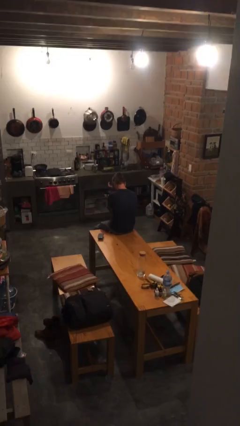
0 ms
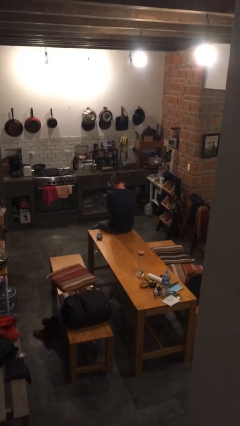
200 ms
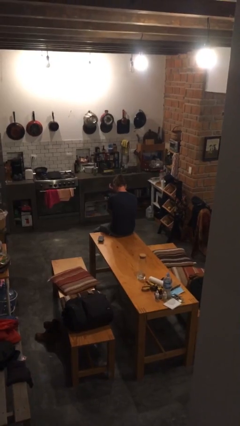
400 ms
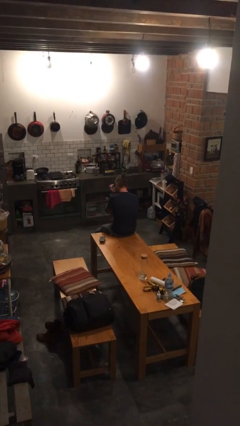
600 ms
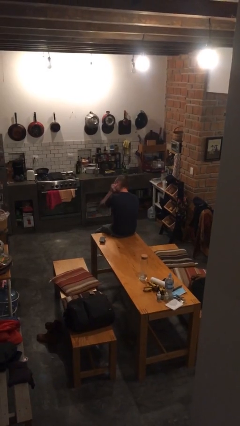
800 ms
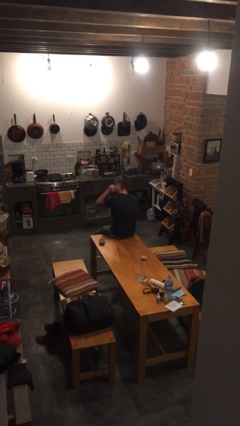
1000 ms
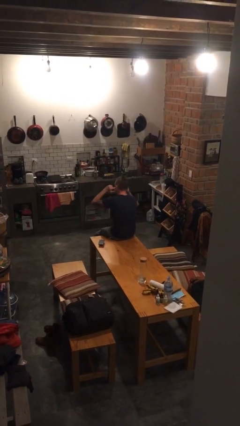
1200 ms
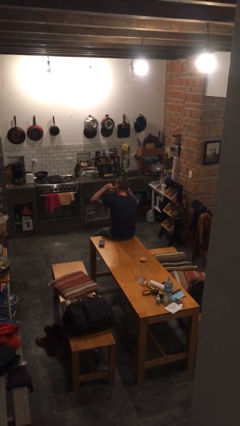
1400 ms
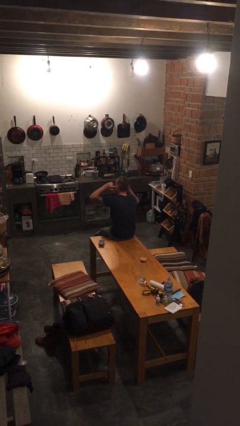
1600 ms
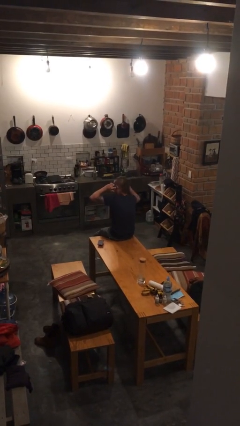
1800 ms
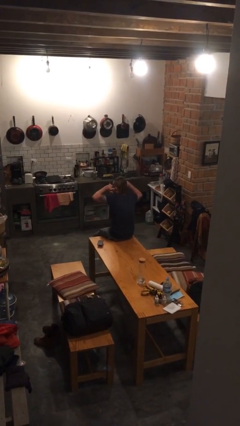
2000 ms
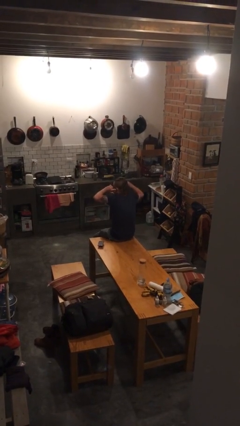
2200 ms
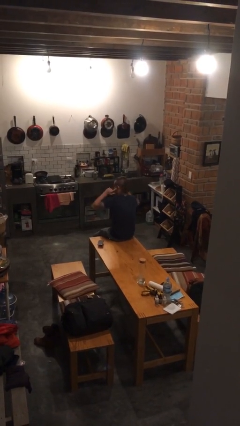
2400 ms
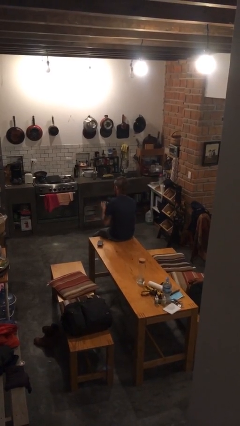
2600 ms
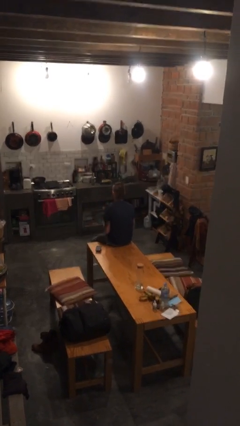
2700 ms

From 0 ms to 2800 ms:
person puts fingers in ear

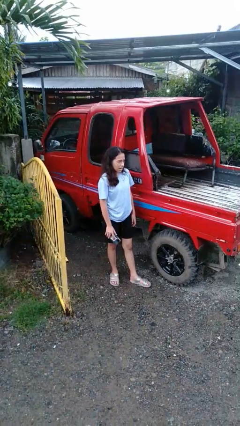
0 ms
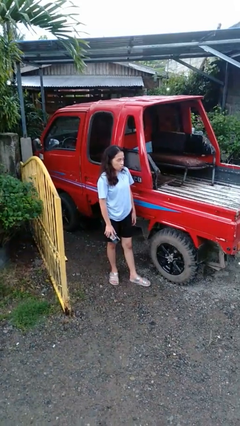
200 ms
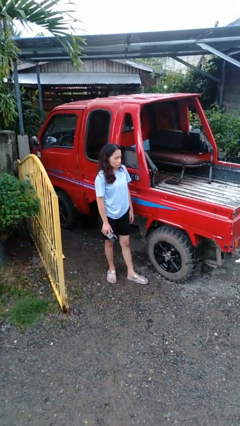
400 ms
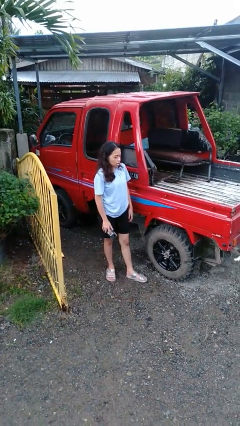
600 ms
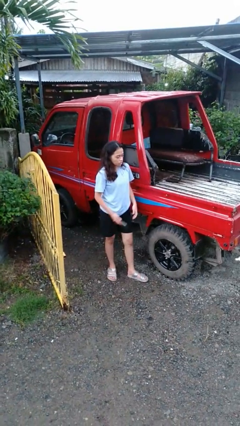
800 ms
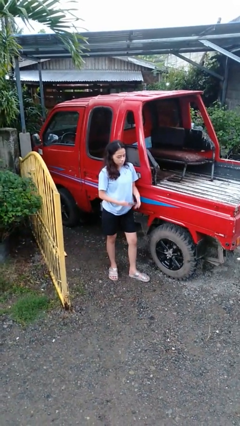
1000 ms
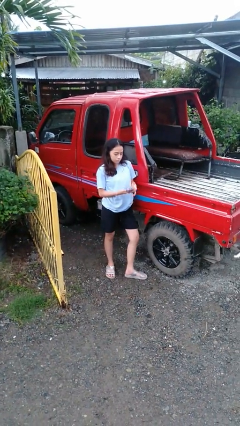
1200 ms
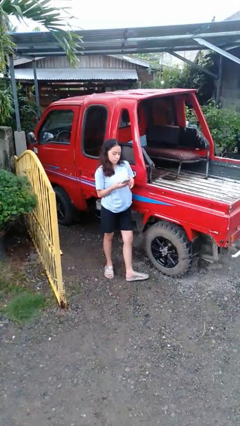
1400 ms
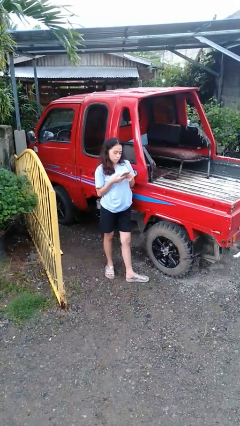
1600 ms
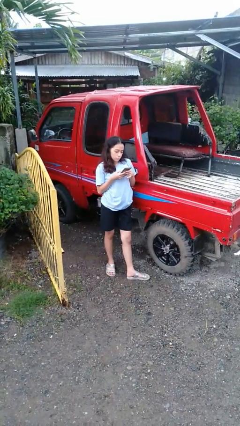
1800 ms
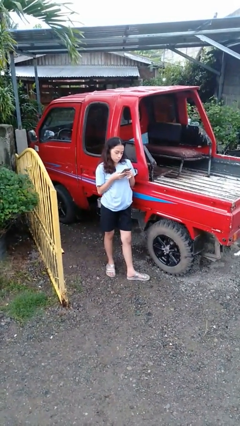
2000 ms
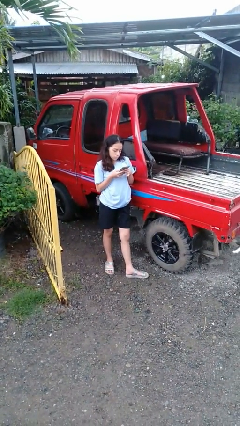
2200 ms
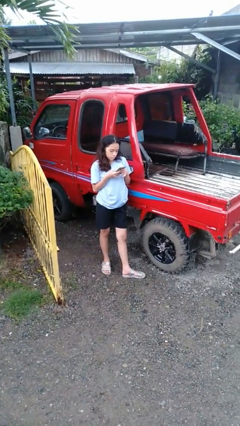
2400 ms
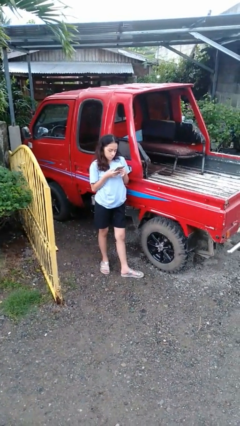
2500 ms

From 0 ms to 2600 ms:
person leans against car

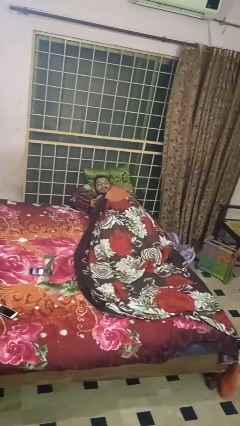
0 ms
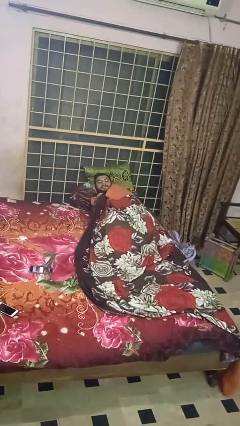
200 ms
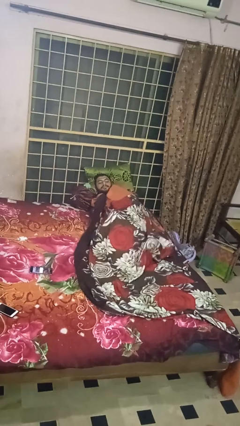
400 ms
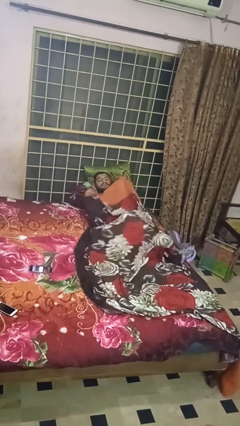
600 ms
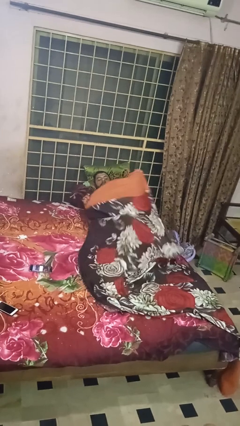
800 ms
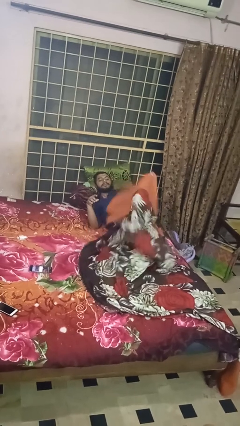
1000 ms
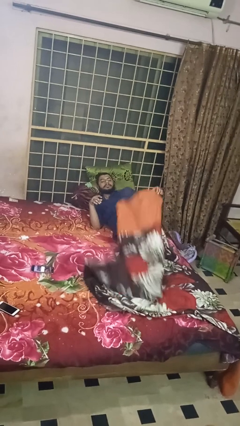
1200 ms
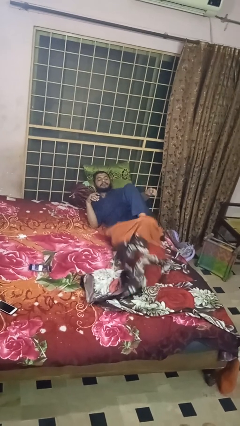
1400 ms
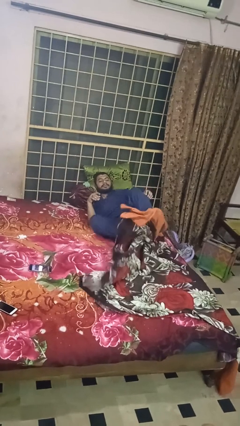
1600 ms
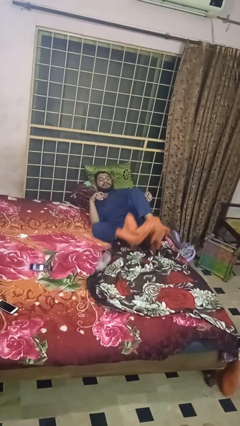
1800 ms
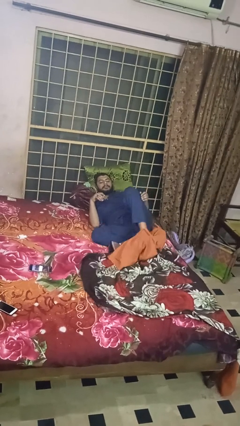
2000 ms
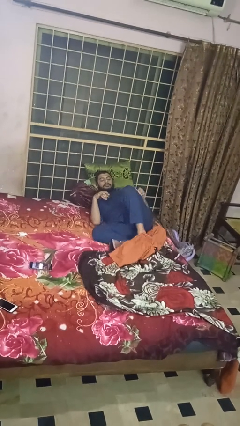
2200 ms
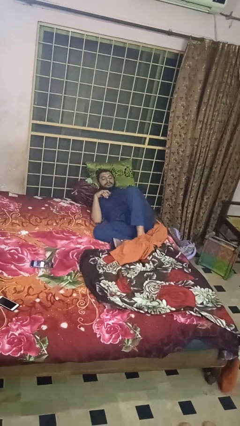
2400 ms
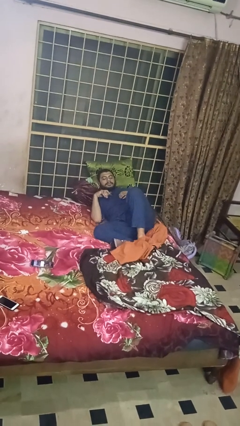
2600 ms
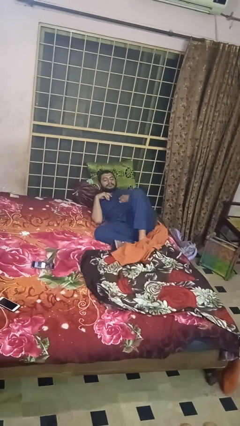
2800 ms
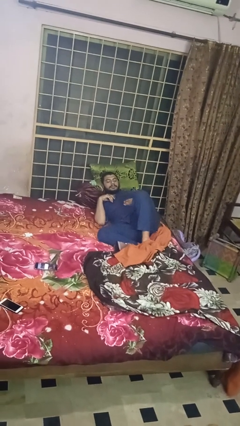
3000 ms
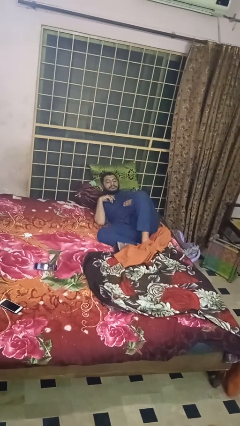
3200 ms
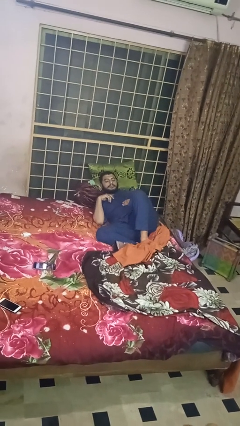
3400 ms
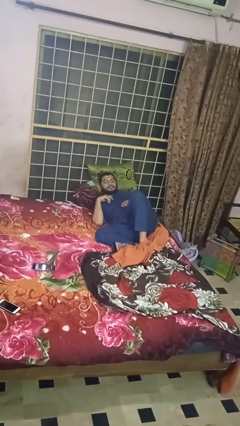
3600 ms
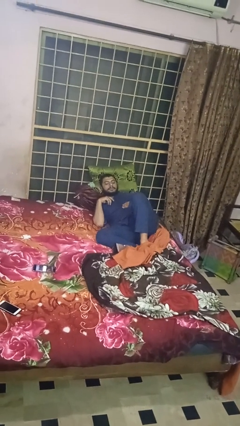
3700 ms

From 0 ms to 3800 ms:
person uncovers with bedsheets

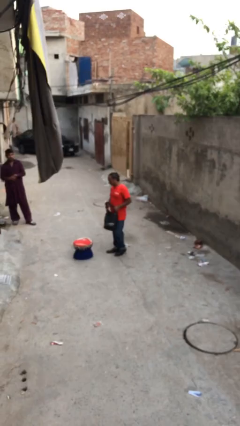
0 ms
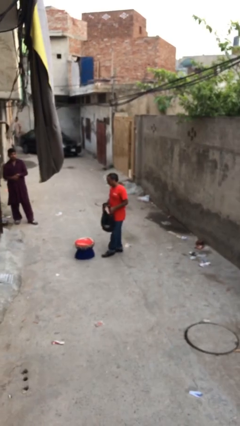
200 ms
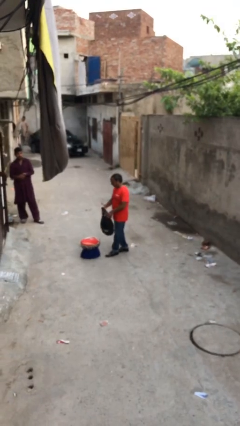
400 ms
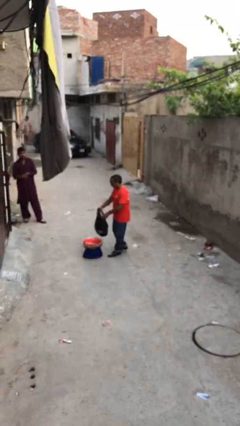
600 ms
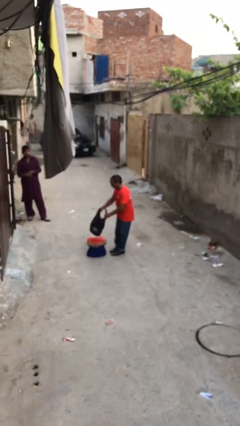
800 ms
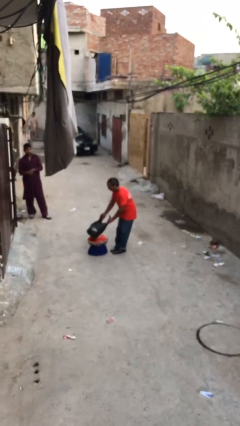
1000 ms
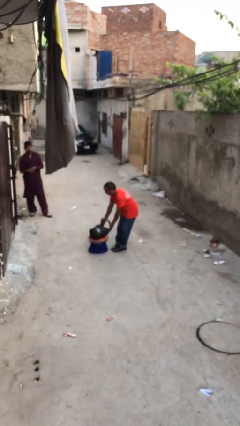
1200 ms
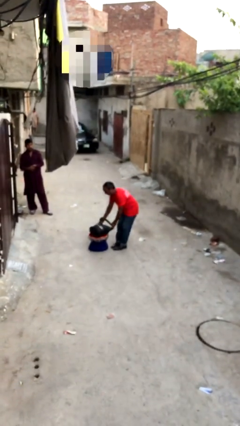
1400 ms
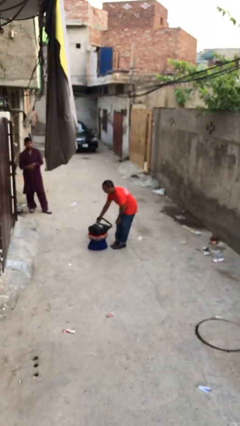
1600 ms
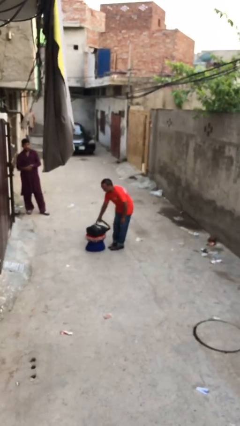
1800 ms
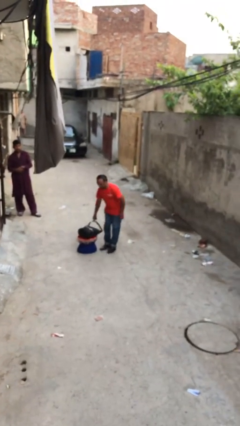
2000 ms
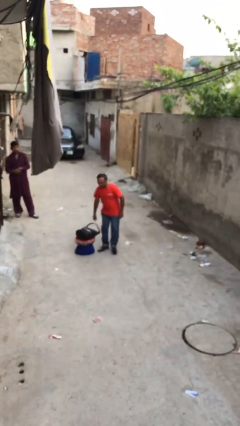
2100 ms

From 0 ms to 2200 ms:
person puts down object on table

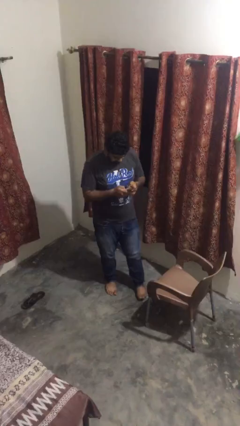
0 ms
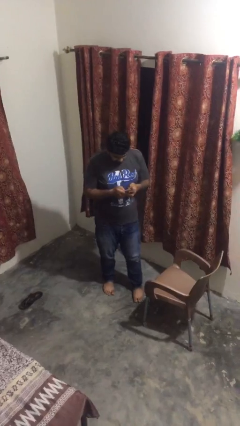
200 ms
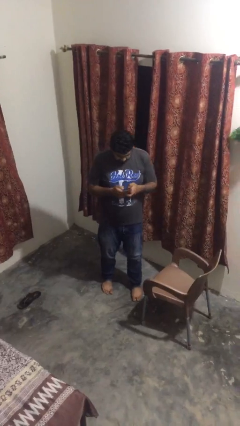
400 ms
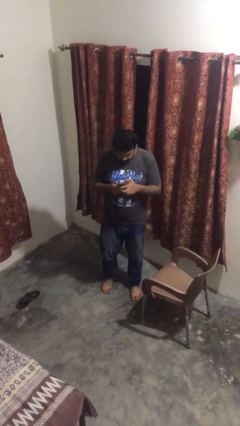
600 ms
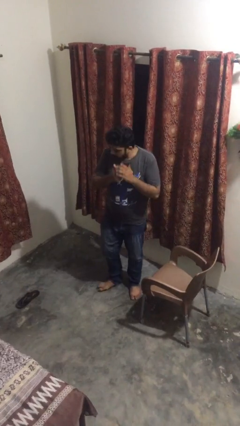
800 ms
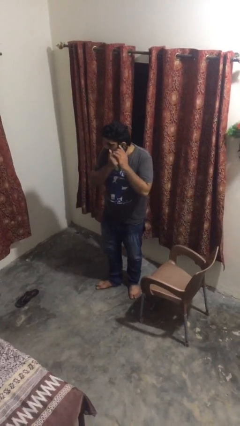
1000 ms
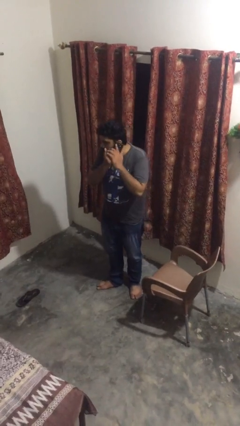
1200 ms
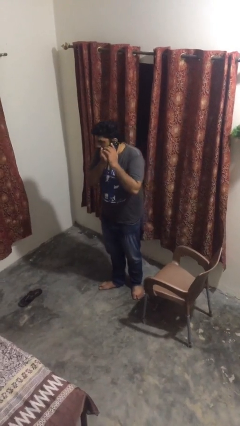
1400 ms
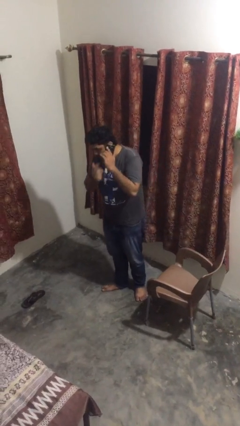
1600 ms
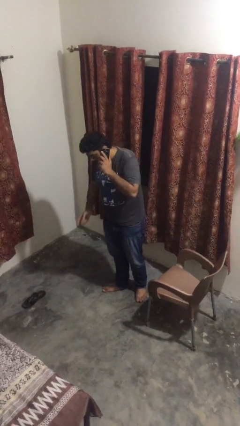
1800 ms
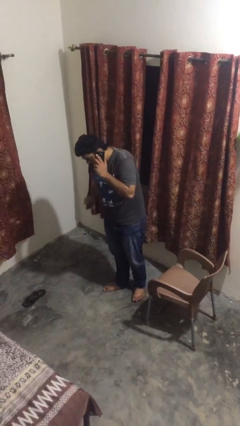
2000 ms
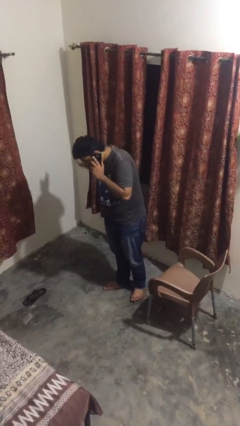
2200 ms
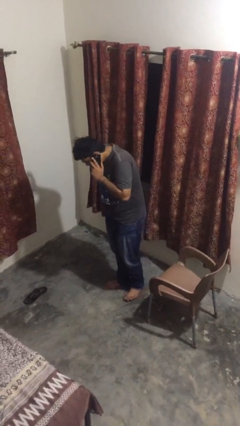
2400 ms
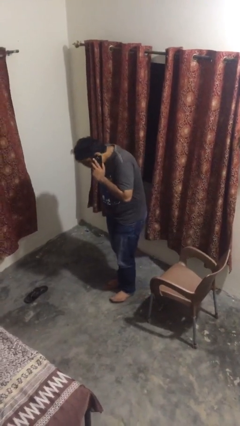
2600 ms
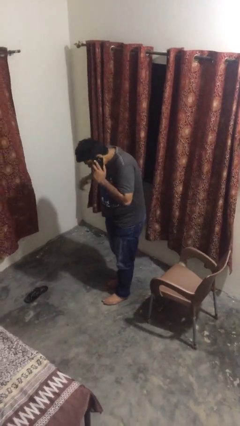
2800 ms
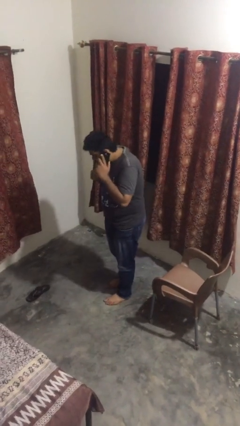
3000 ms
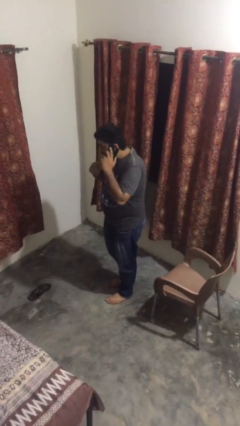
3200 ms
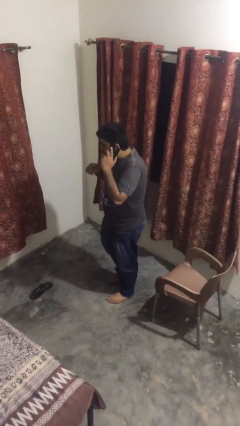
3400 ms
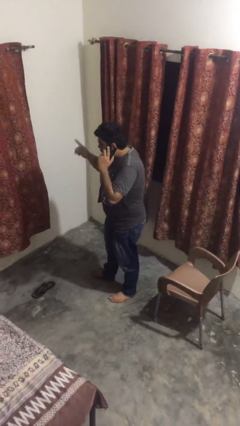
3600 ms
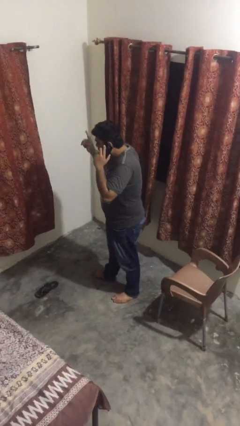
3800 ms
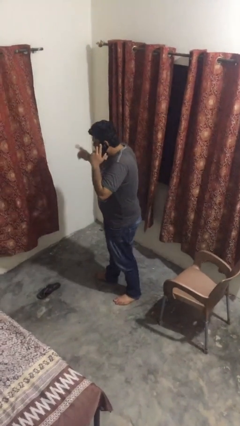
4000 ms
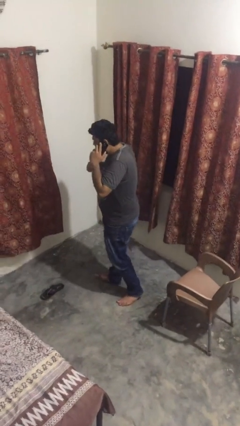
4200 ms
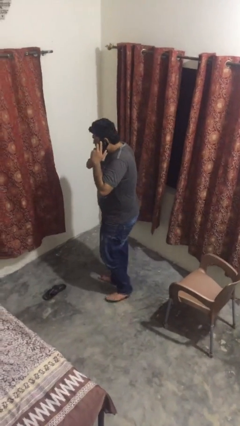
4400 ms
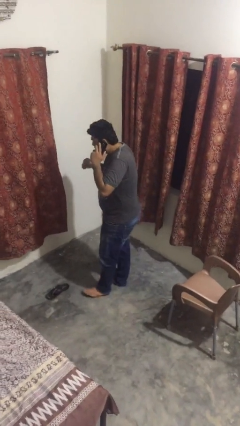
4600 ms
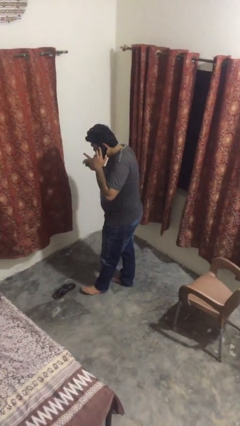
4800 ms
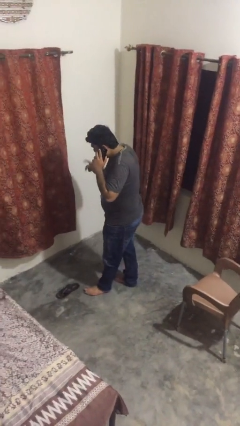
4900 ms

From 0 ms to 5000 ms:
person talks on phone

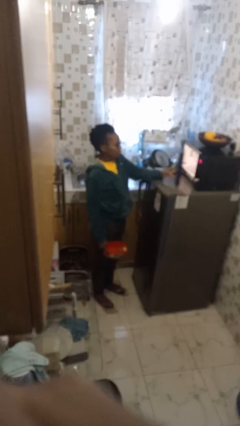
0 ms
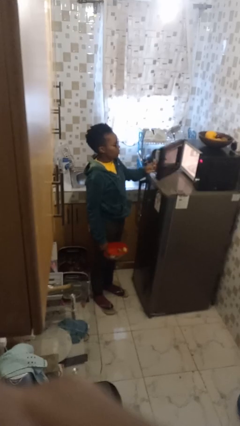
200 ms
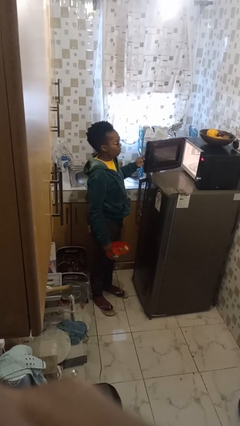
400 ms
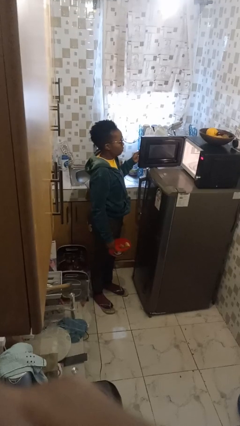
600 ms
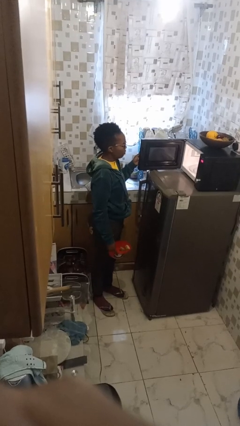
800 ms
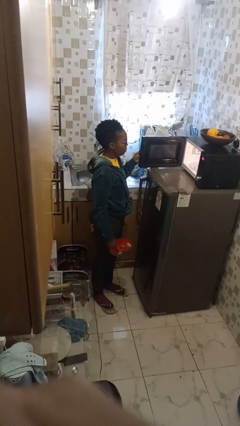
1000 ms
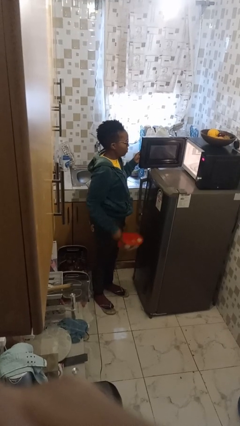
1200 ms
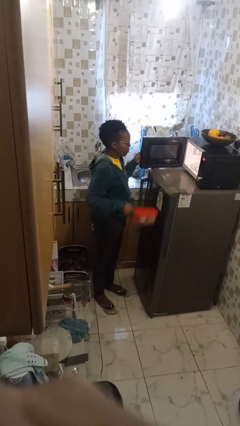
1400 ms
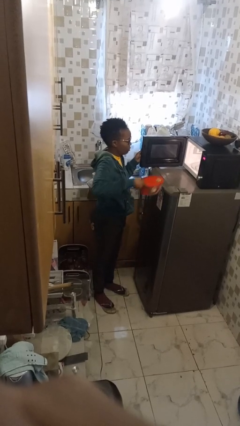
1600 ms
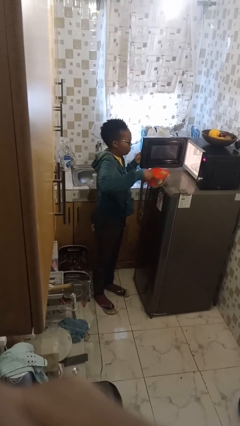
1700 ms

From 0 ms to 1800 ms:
person opens microwave
